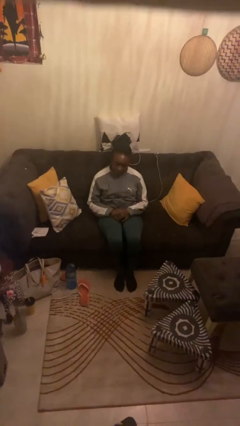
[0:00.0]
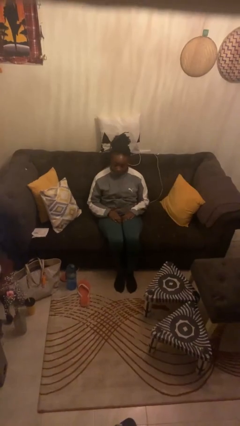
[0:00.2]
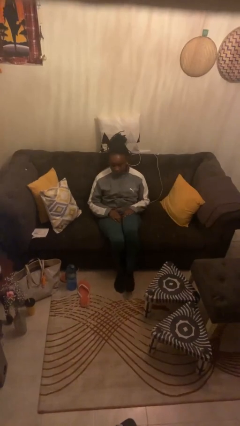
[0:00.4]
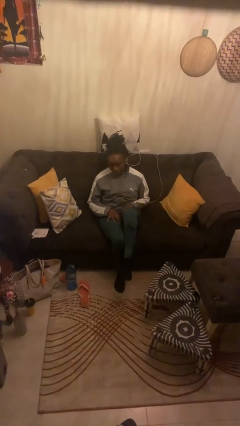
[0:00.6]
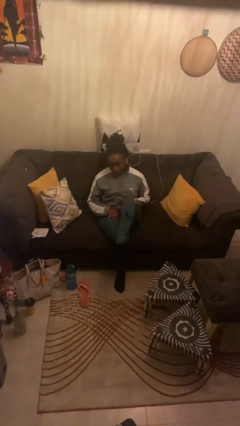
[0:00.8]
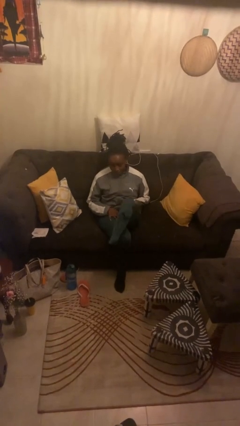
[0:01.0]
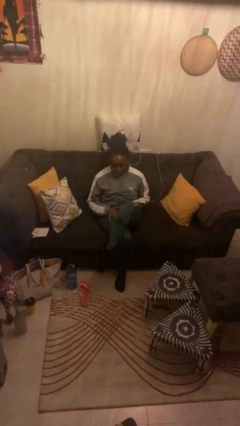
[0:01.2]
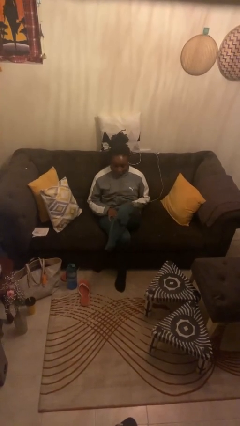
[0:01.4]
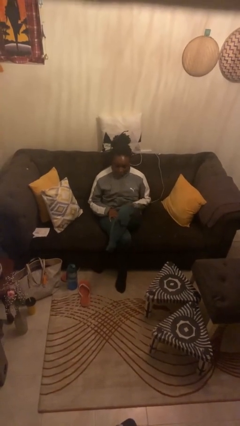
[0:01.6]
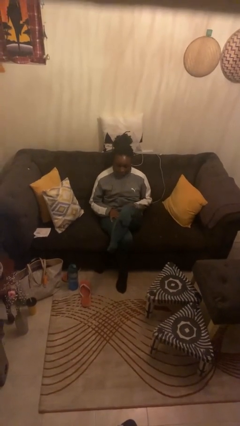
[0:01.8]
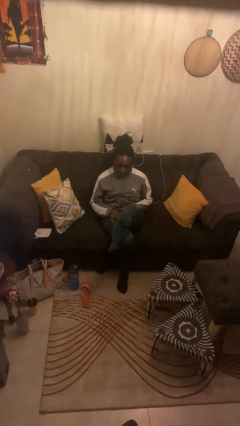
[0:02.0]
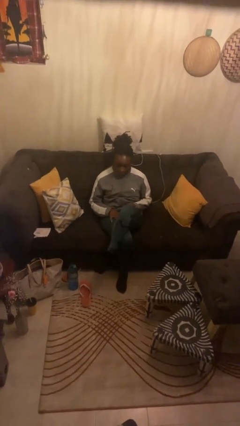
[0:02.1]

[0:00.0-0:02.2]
person crosses legs

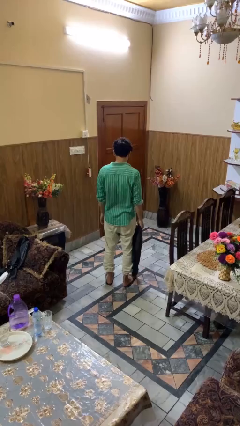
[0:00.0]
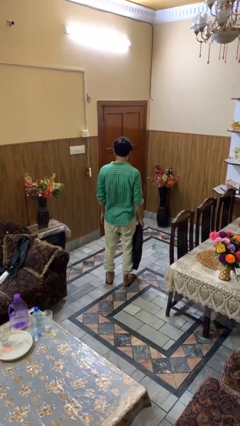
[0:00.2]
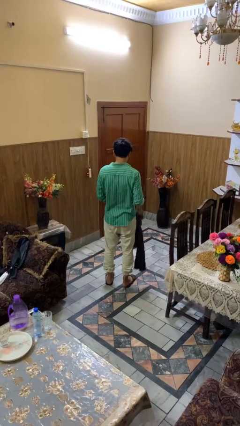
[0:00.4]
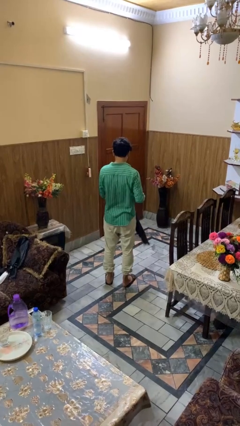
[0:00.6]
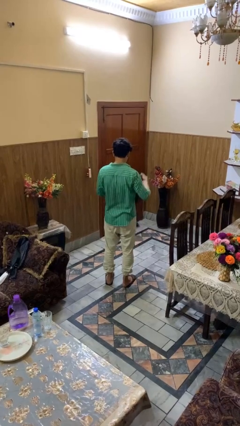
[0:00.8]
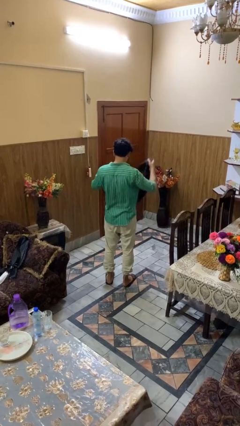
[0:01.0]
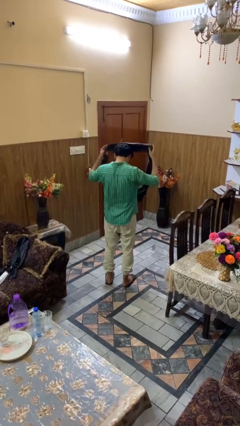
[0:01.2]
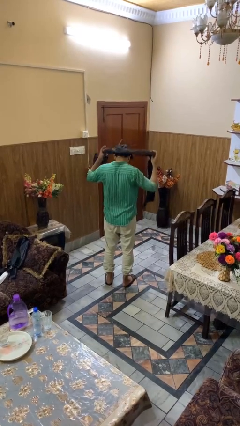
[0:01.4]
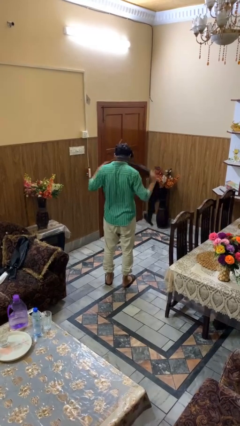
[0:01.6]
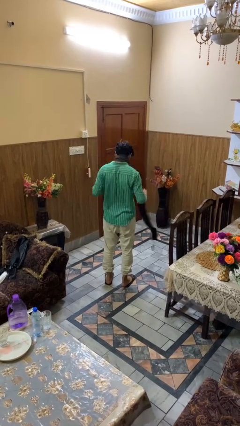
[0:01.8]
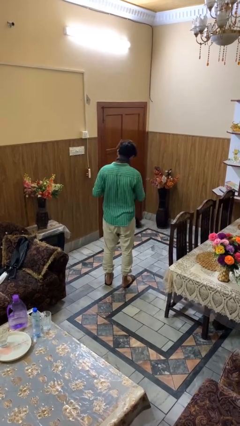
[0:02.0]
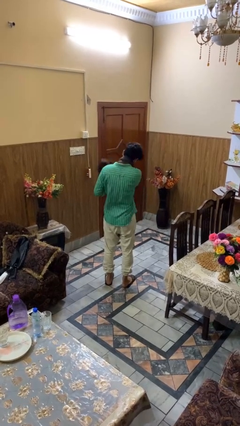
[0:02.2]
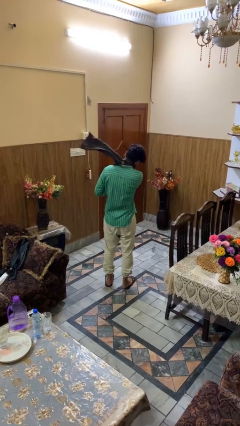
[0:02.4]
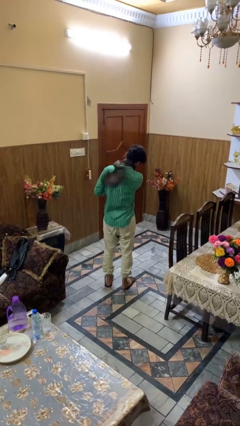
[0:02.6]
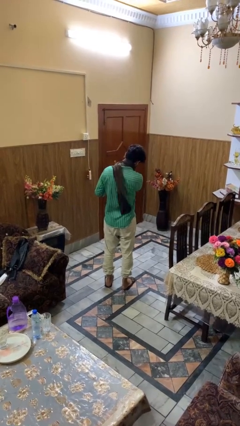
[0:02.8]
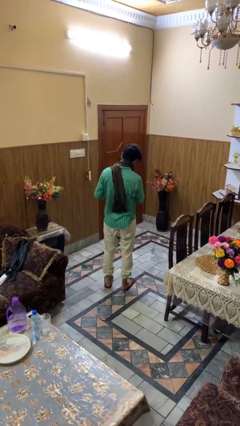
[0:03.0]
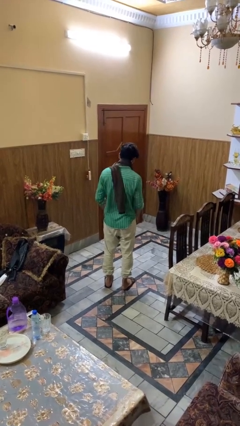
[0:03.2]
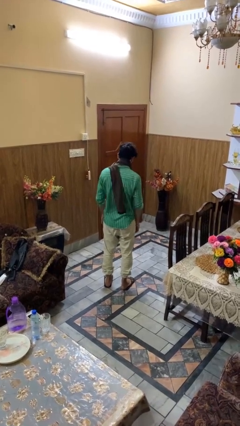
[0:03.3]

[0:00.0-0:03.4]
person puts on scarf

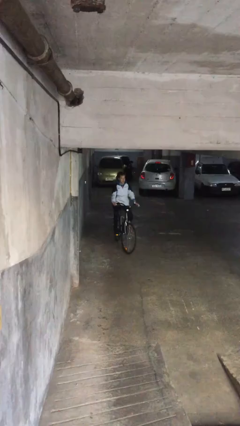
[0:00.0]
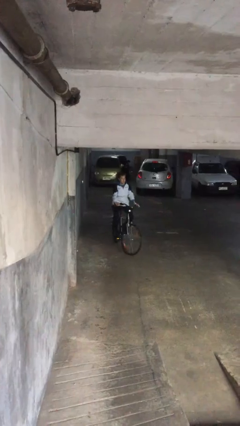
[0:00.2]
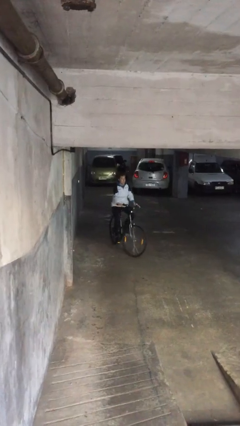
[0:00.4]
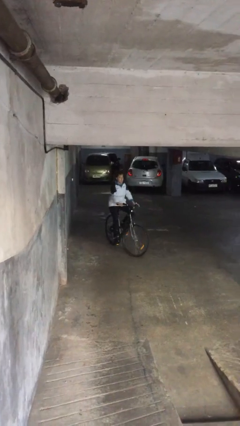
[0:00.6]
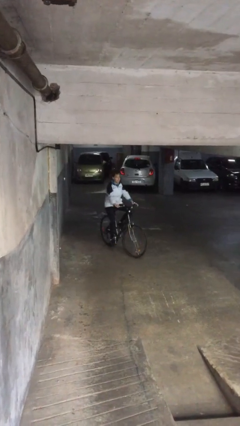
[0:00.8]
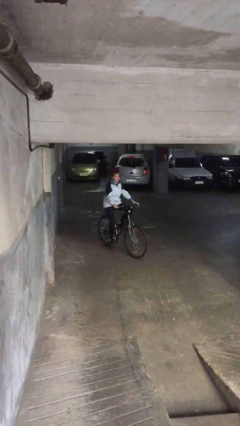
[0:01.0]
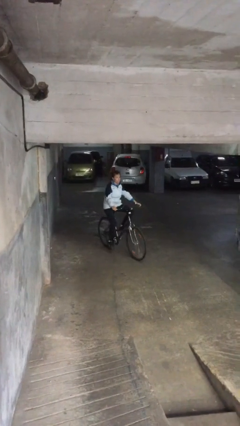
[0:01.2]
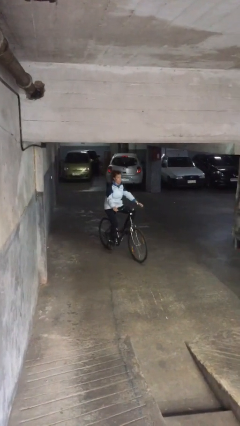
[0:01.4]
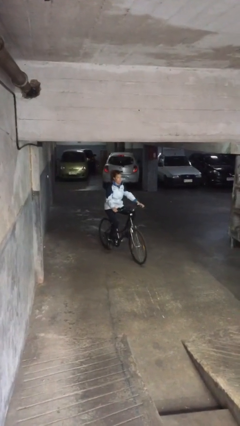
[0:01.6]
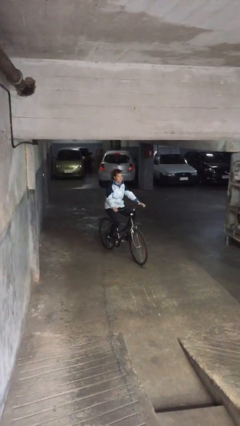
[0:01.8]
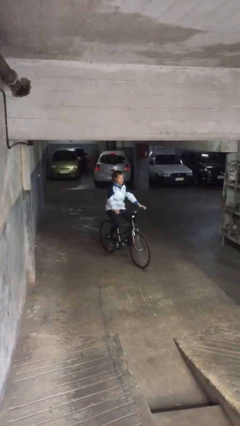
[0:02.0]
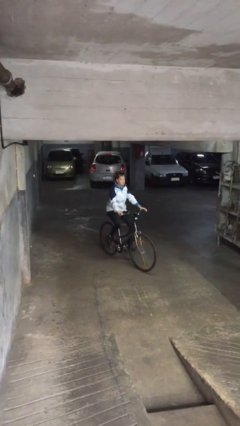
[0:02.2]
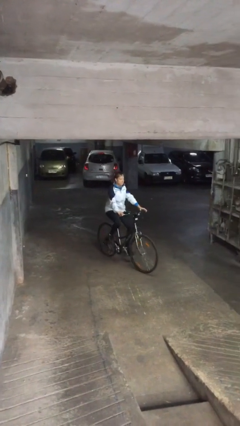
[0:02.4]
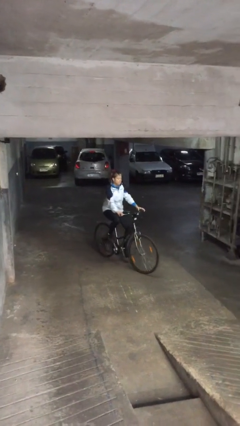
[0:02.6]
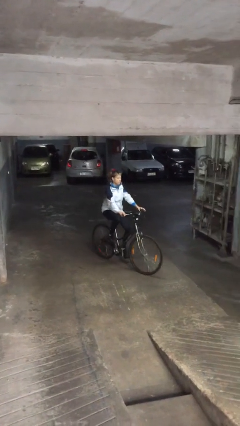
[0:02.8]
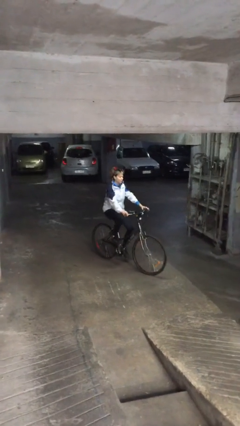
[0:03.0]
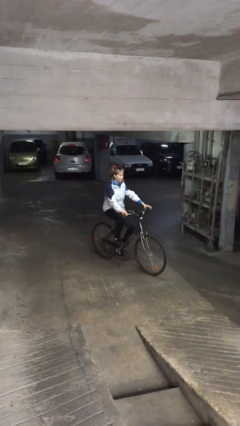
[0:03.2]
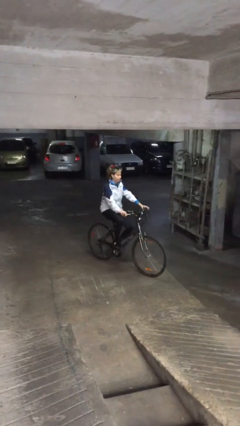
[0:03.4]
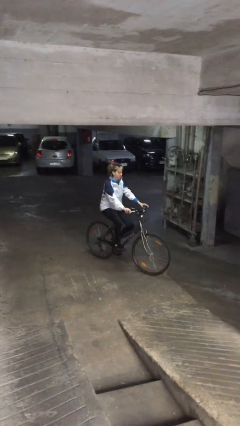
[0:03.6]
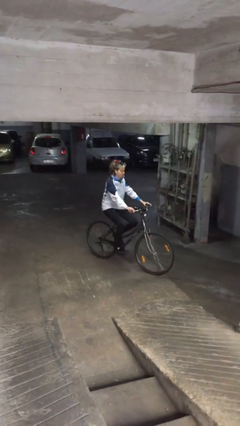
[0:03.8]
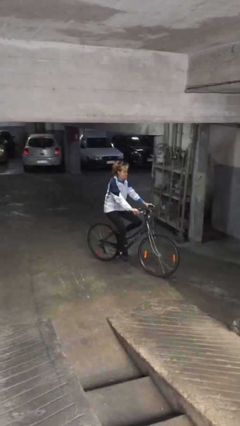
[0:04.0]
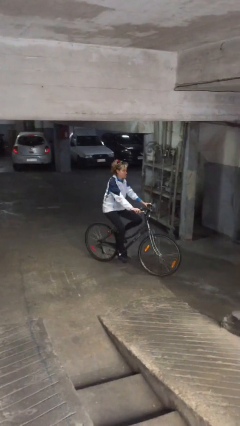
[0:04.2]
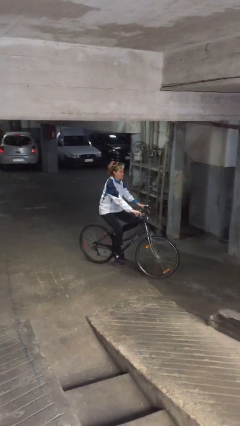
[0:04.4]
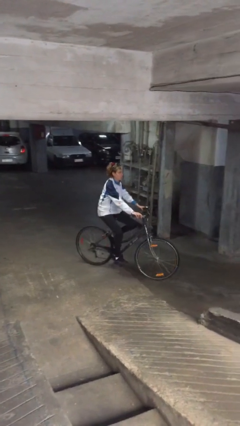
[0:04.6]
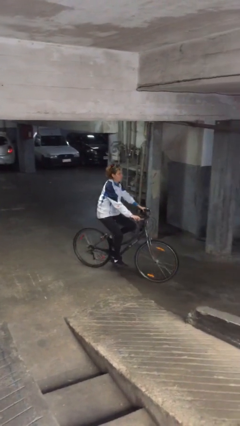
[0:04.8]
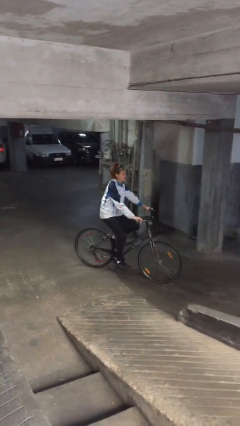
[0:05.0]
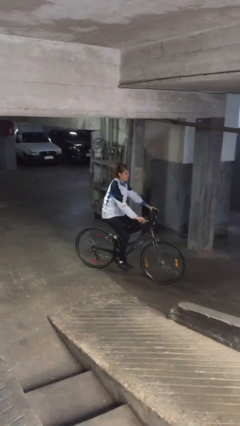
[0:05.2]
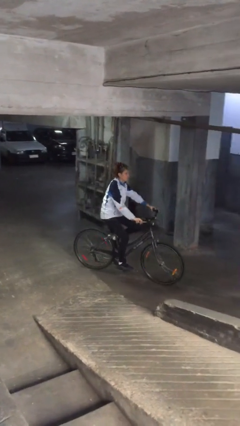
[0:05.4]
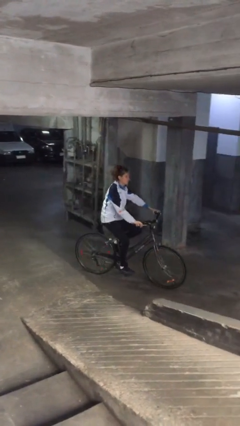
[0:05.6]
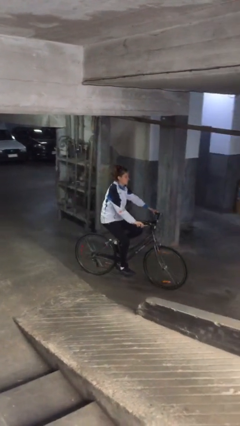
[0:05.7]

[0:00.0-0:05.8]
person rides bicycle

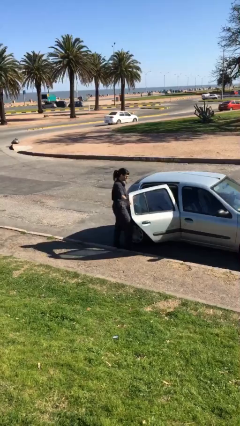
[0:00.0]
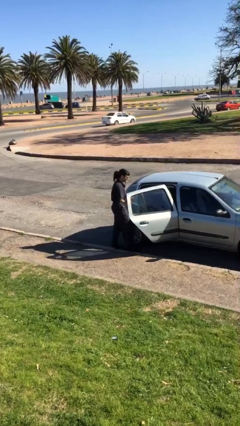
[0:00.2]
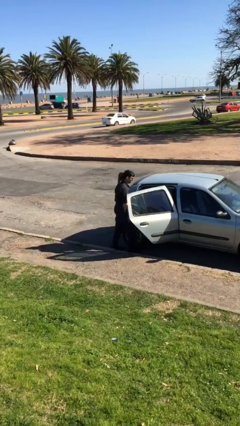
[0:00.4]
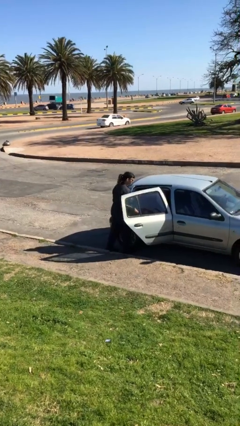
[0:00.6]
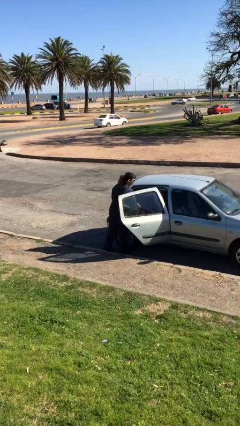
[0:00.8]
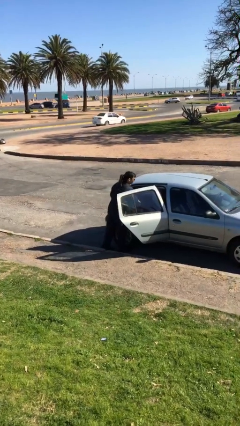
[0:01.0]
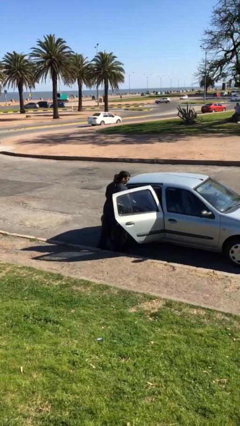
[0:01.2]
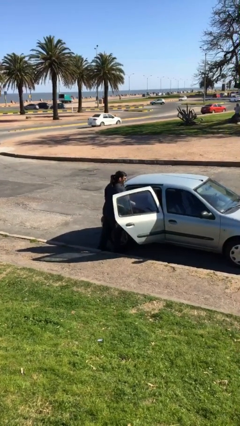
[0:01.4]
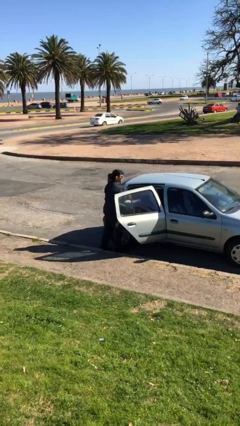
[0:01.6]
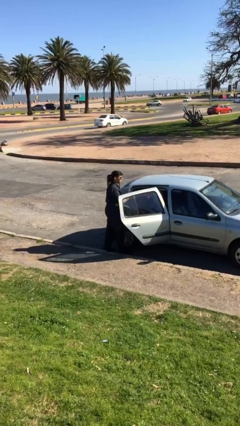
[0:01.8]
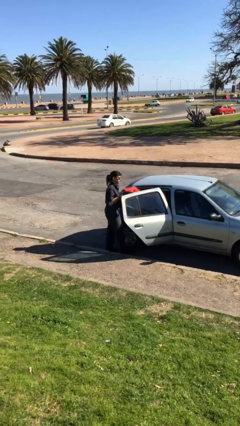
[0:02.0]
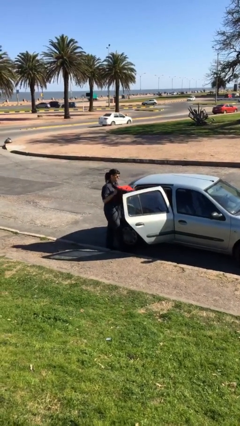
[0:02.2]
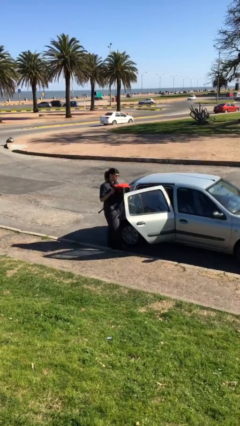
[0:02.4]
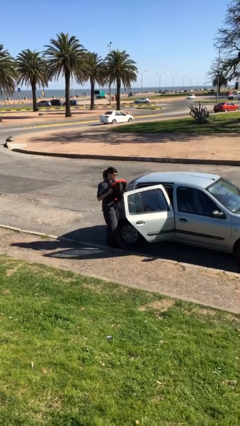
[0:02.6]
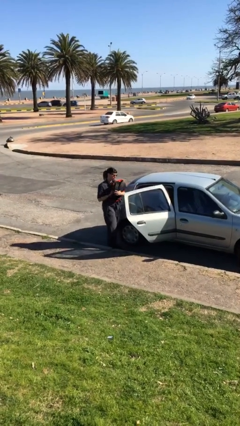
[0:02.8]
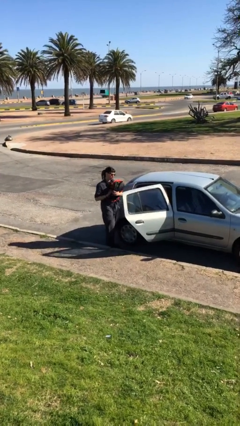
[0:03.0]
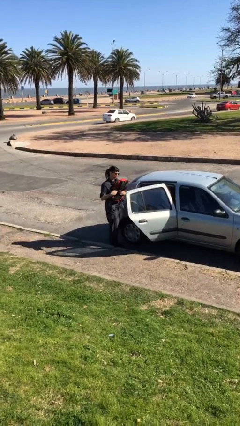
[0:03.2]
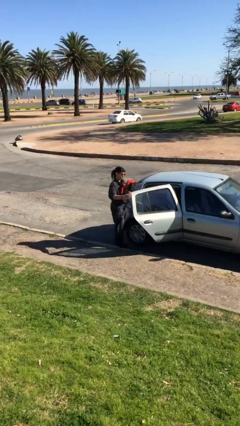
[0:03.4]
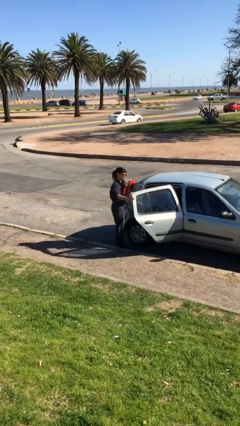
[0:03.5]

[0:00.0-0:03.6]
person unloads car

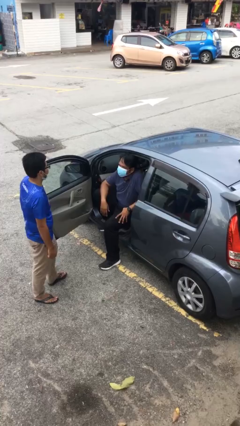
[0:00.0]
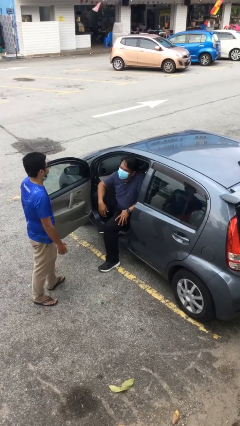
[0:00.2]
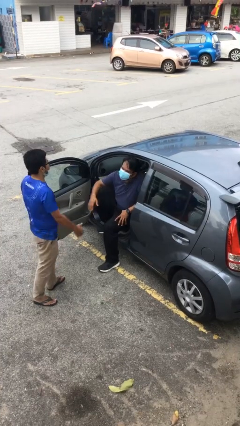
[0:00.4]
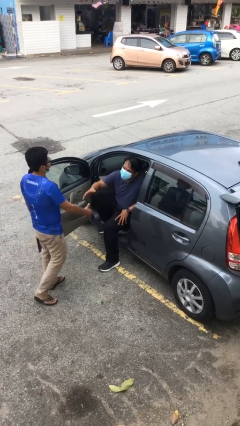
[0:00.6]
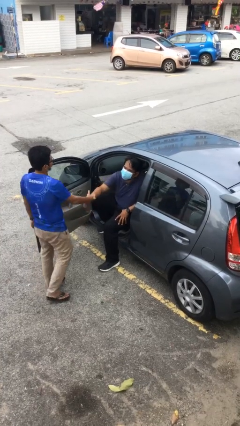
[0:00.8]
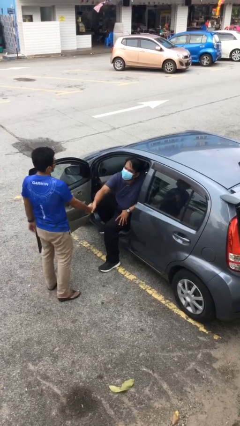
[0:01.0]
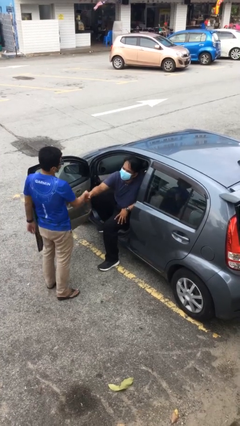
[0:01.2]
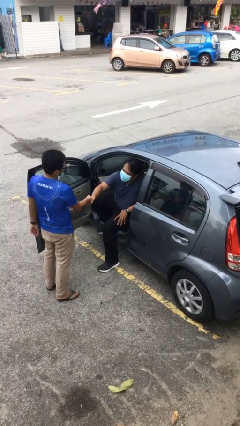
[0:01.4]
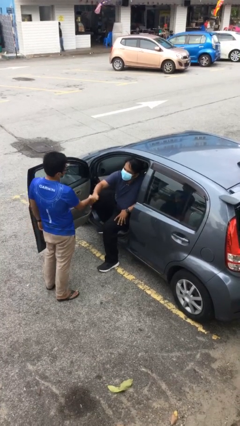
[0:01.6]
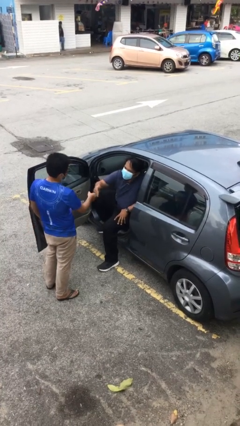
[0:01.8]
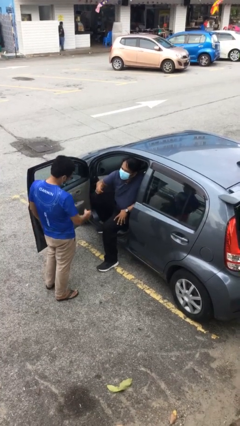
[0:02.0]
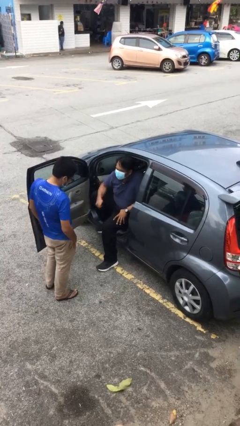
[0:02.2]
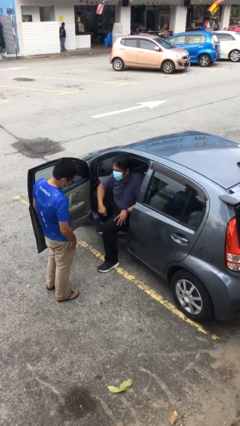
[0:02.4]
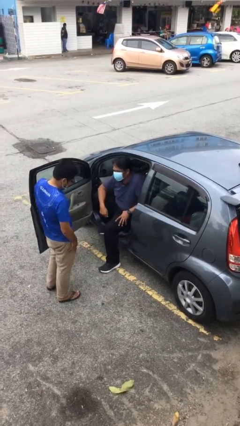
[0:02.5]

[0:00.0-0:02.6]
person shakes hand
